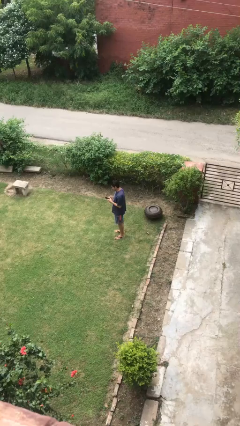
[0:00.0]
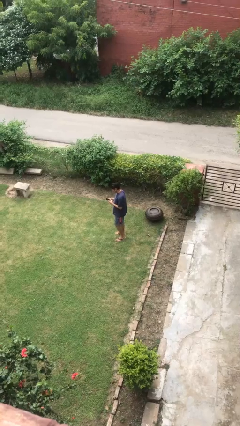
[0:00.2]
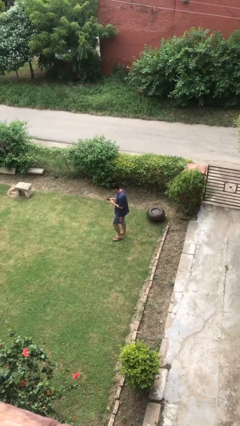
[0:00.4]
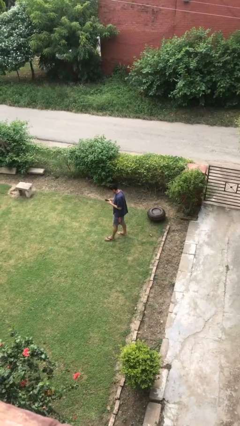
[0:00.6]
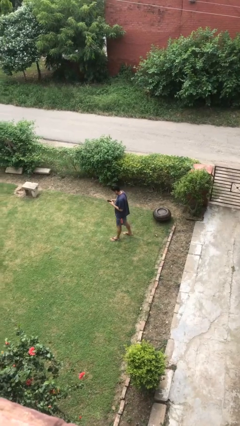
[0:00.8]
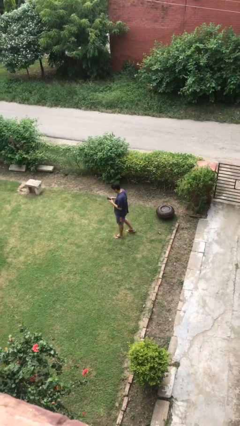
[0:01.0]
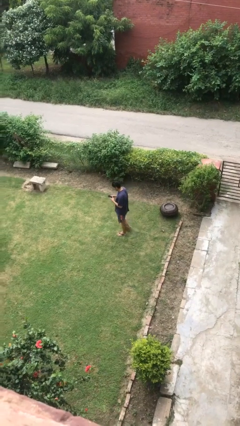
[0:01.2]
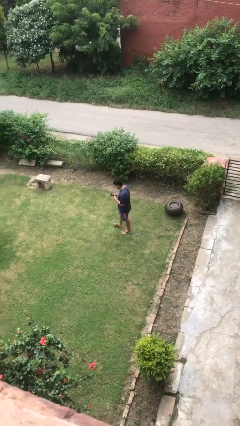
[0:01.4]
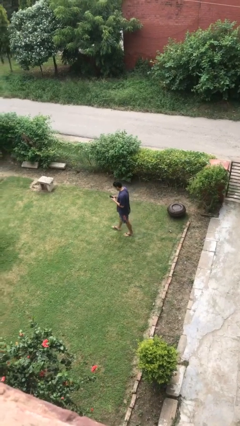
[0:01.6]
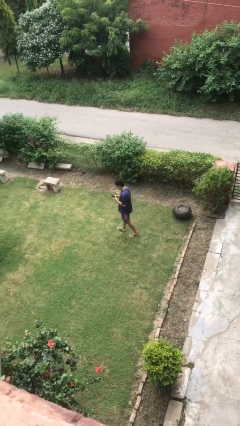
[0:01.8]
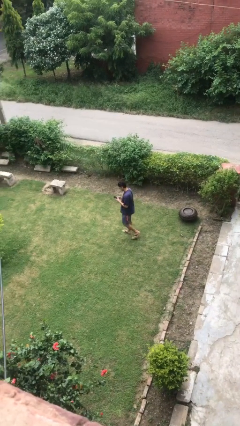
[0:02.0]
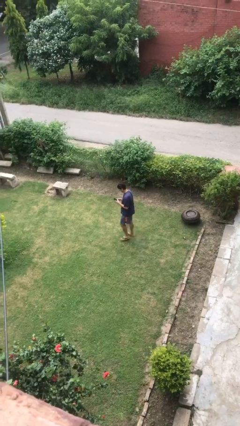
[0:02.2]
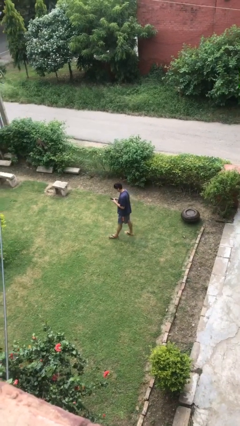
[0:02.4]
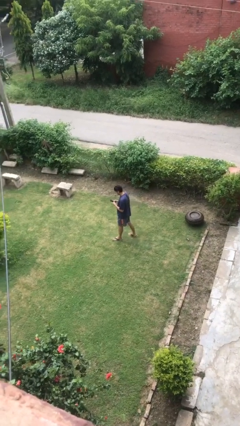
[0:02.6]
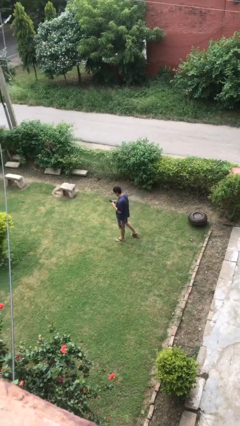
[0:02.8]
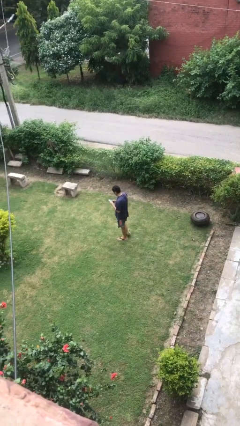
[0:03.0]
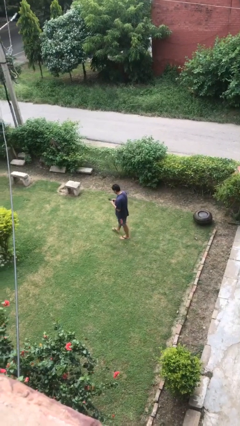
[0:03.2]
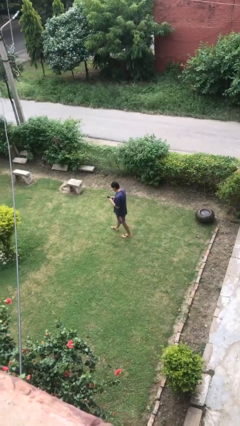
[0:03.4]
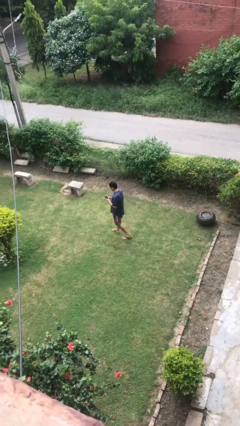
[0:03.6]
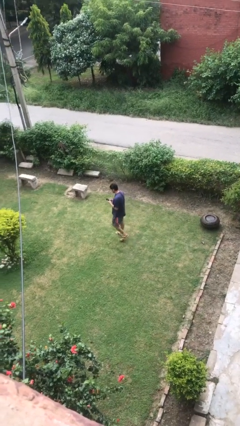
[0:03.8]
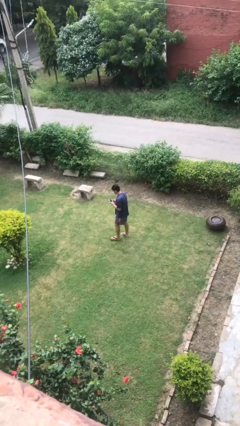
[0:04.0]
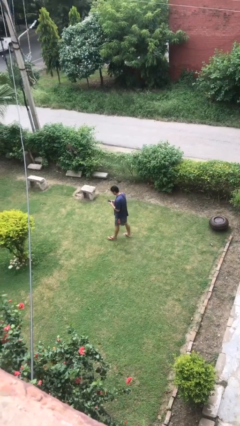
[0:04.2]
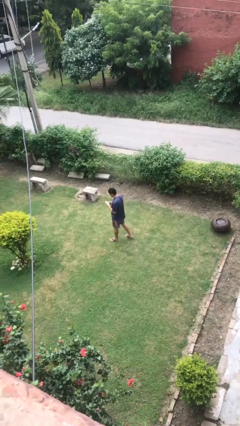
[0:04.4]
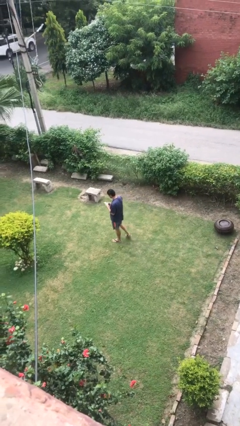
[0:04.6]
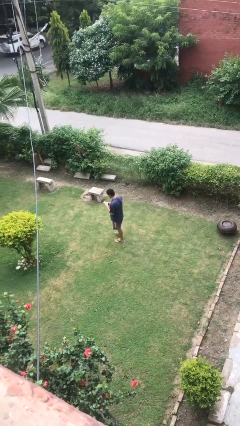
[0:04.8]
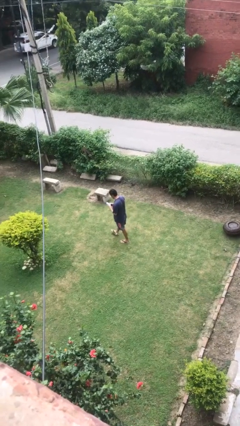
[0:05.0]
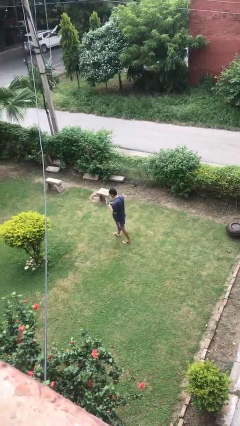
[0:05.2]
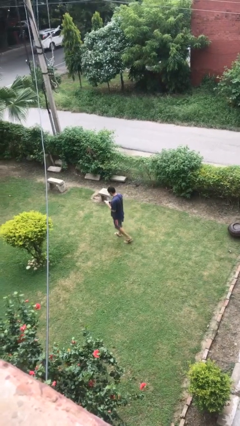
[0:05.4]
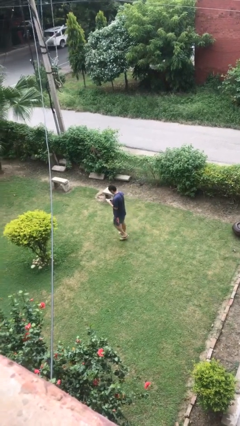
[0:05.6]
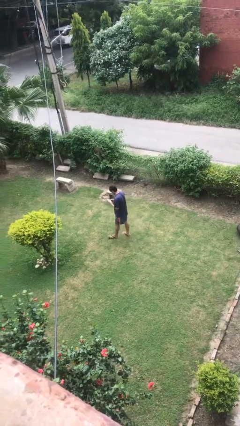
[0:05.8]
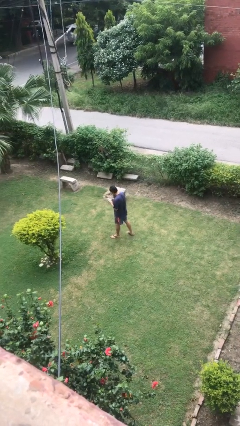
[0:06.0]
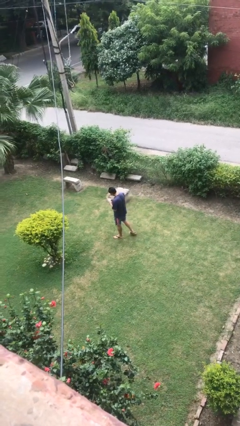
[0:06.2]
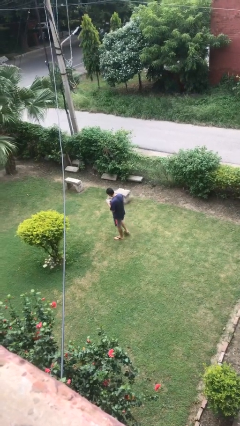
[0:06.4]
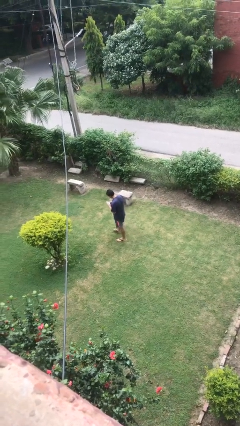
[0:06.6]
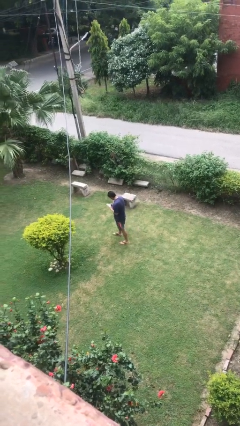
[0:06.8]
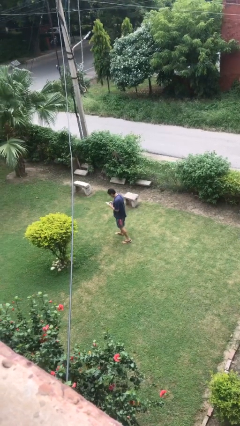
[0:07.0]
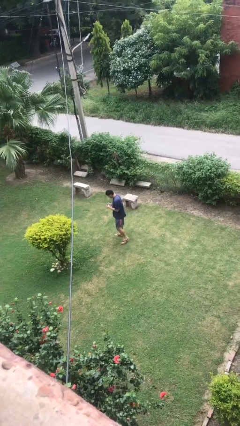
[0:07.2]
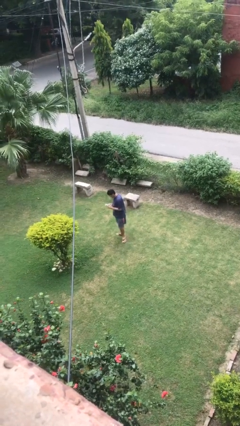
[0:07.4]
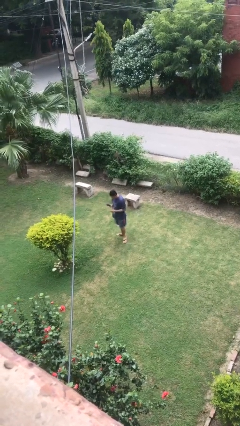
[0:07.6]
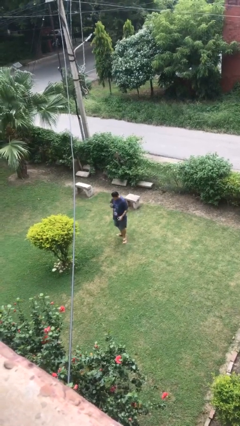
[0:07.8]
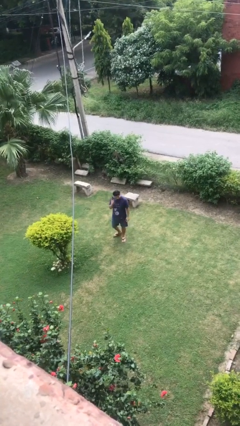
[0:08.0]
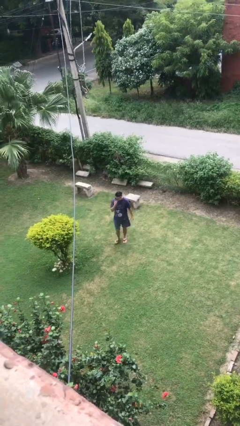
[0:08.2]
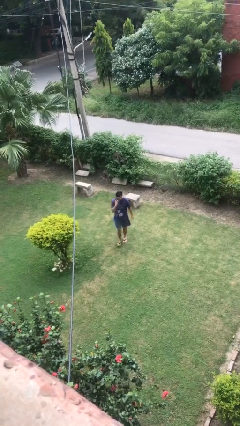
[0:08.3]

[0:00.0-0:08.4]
person texts on phone

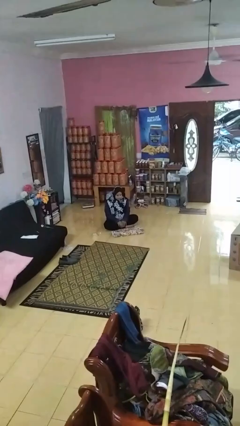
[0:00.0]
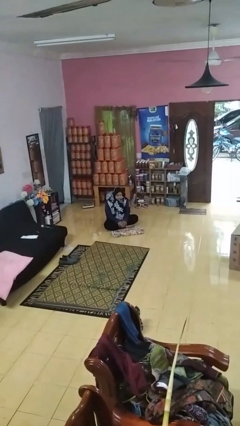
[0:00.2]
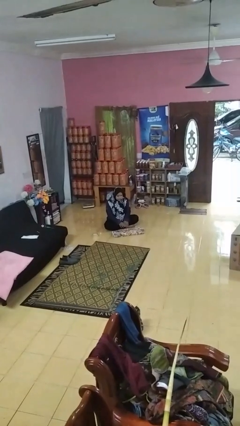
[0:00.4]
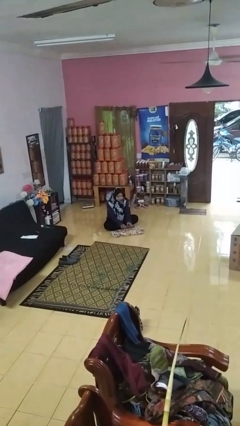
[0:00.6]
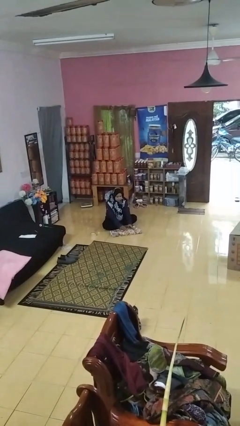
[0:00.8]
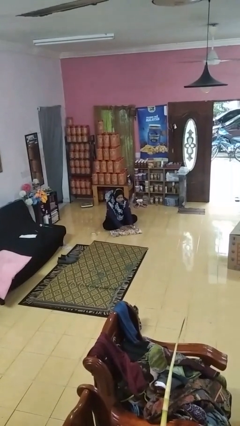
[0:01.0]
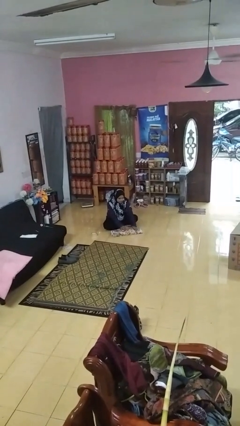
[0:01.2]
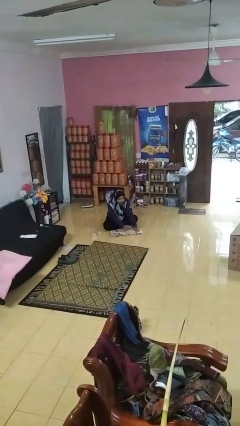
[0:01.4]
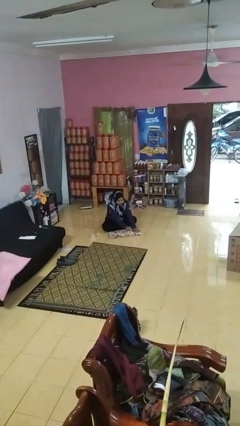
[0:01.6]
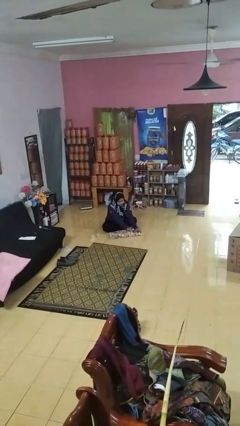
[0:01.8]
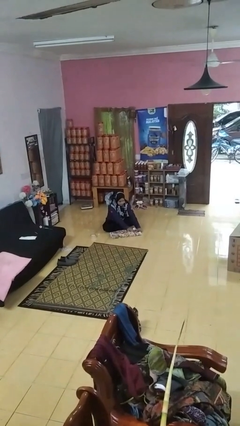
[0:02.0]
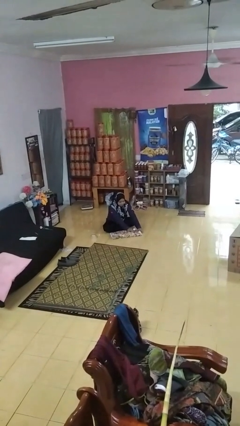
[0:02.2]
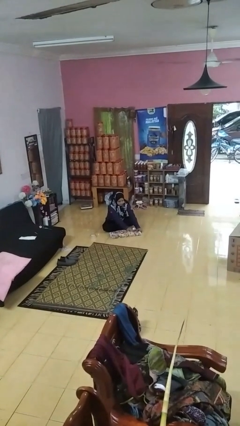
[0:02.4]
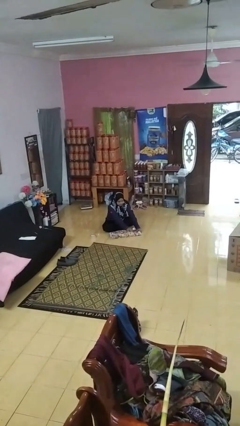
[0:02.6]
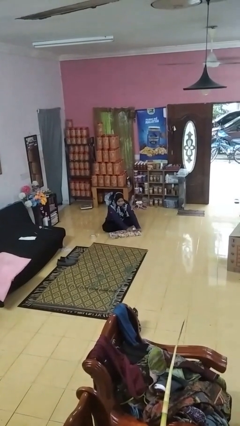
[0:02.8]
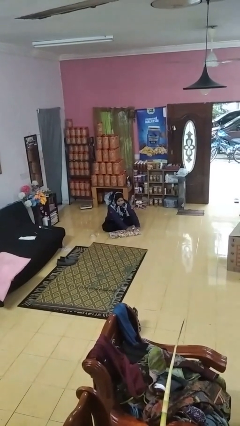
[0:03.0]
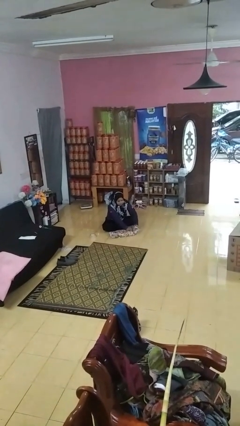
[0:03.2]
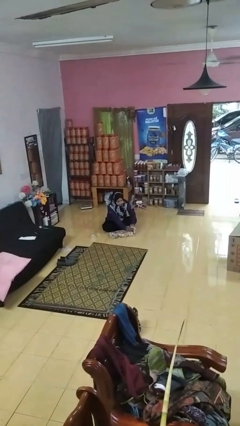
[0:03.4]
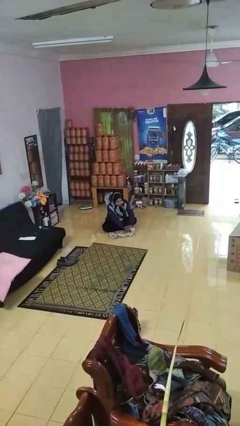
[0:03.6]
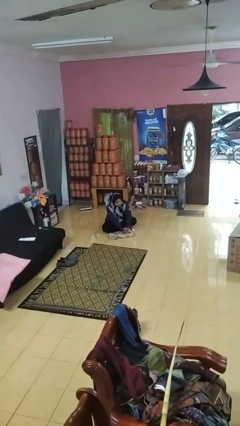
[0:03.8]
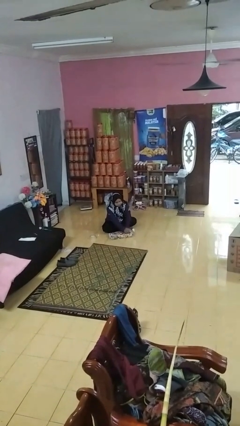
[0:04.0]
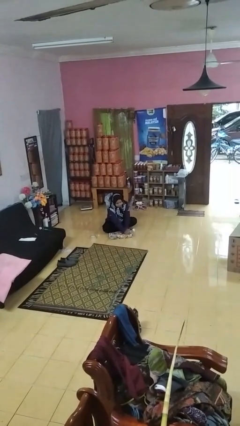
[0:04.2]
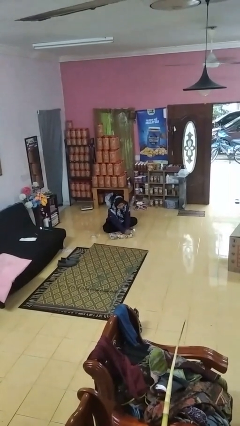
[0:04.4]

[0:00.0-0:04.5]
person wraps box

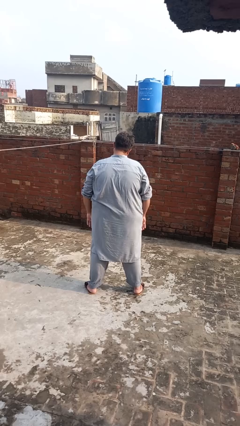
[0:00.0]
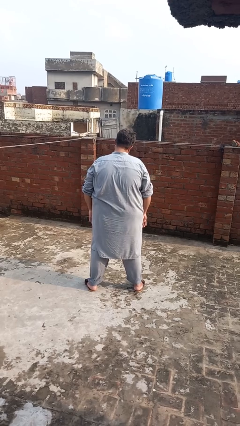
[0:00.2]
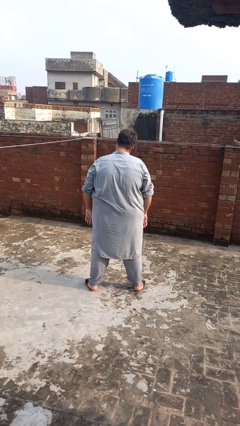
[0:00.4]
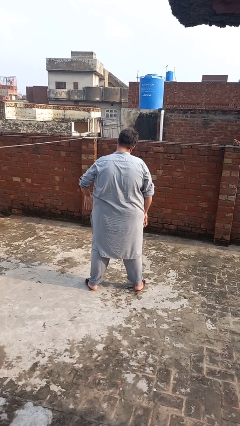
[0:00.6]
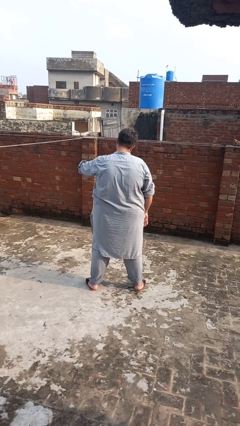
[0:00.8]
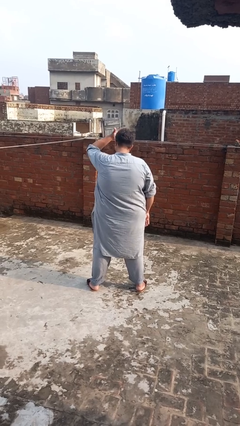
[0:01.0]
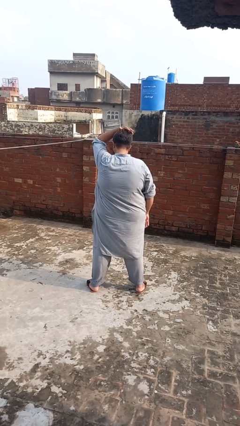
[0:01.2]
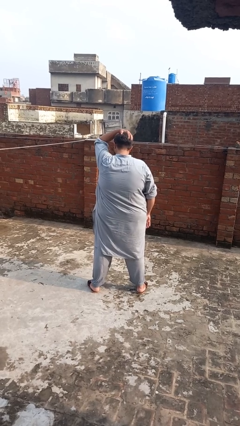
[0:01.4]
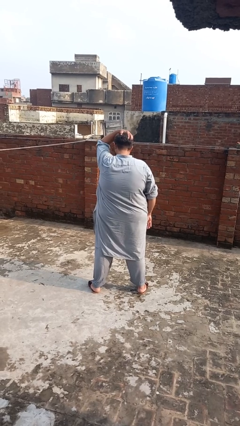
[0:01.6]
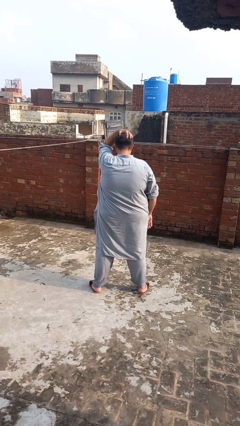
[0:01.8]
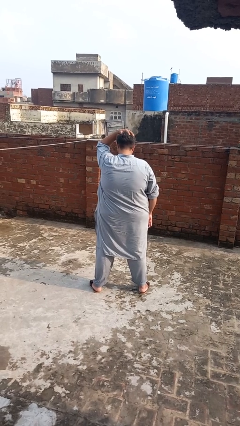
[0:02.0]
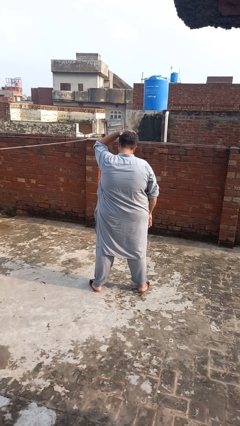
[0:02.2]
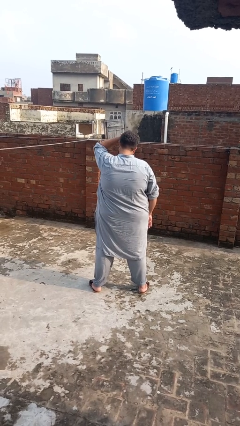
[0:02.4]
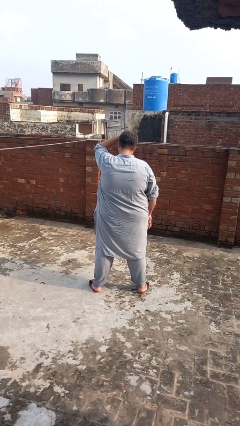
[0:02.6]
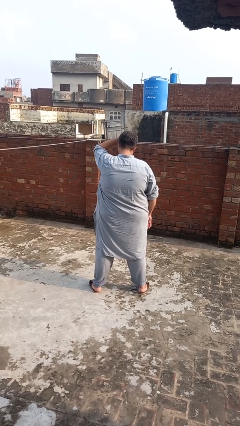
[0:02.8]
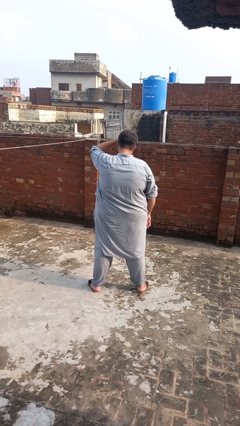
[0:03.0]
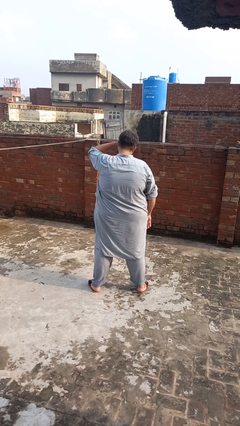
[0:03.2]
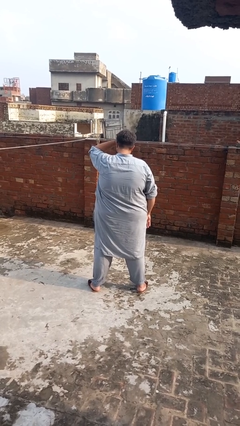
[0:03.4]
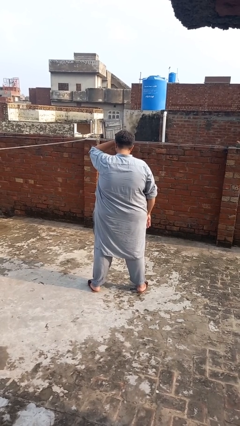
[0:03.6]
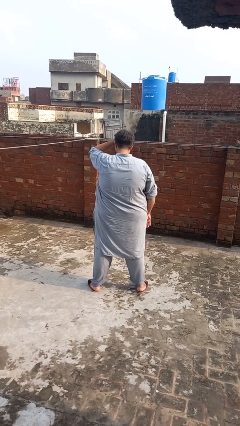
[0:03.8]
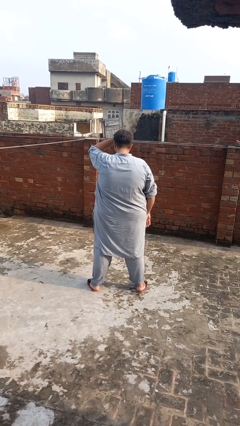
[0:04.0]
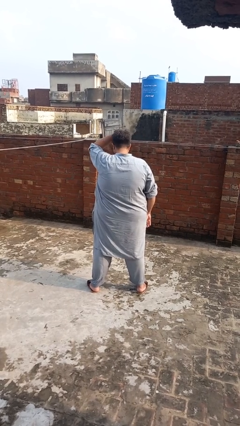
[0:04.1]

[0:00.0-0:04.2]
person pats head

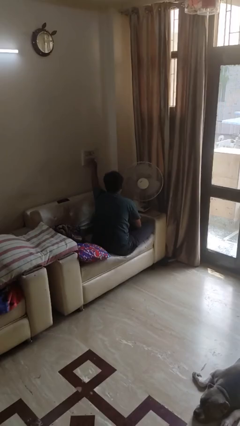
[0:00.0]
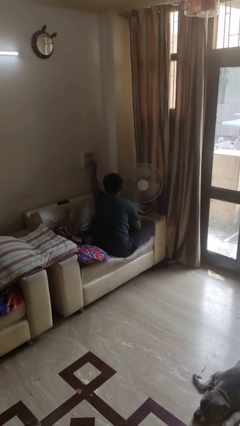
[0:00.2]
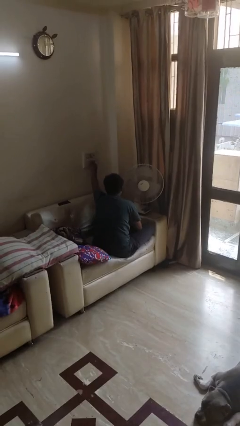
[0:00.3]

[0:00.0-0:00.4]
person turns off fan
